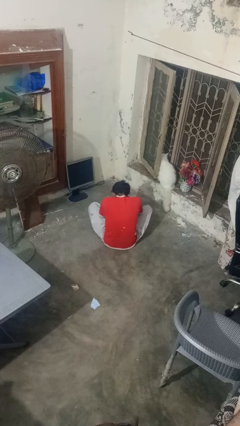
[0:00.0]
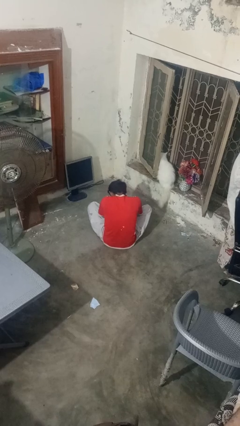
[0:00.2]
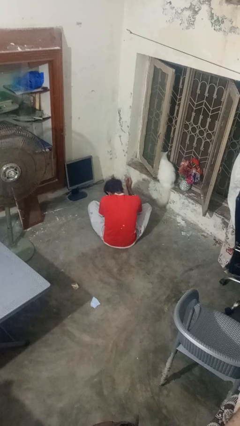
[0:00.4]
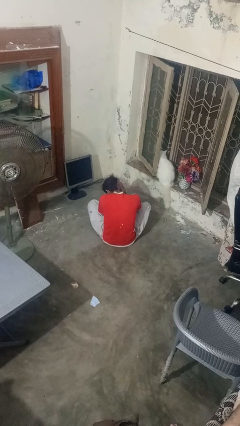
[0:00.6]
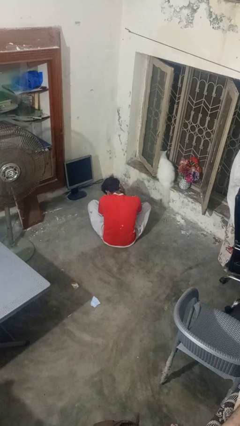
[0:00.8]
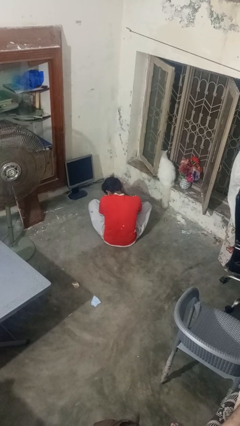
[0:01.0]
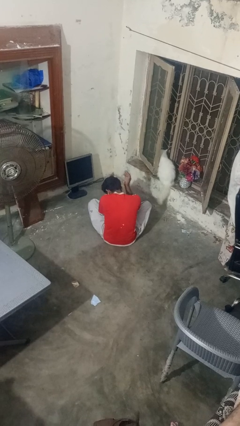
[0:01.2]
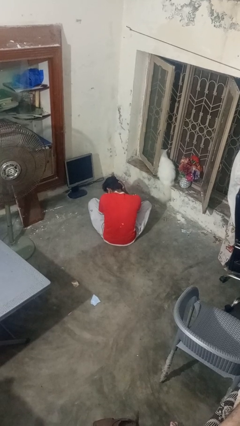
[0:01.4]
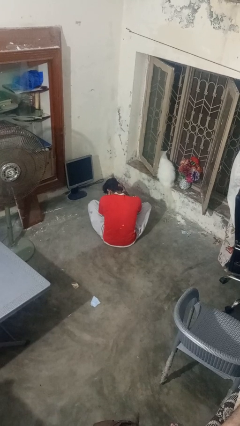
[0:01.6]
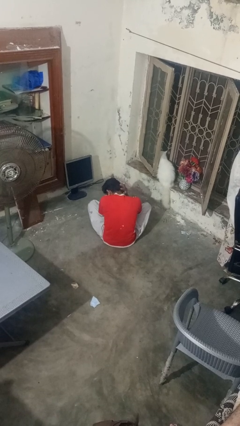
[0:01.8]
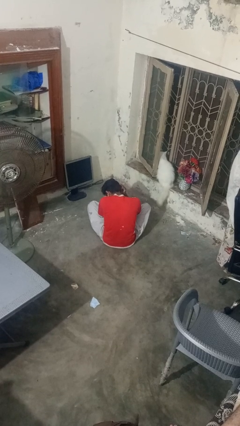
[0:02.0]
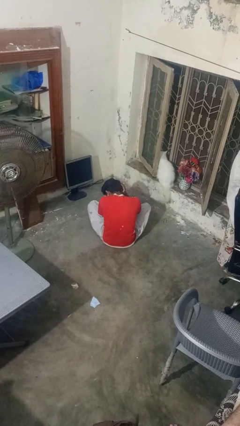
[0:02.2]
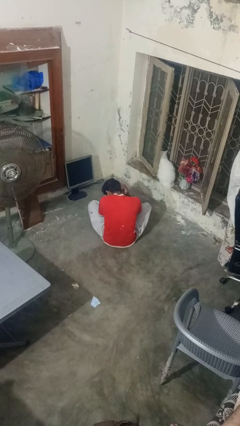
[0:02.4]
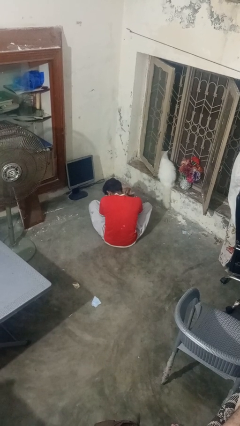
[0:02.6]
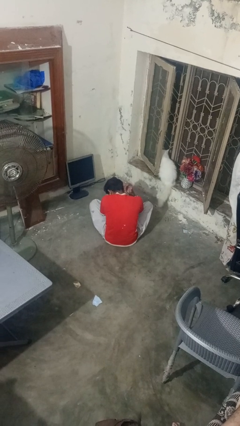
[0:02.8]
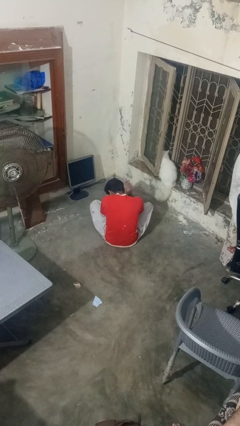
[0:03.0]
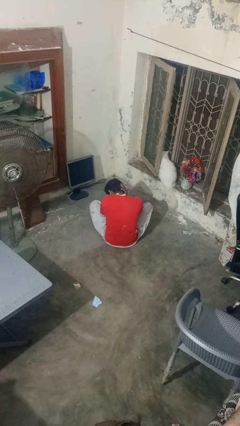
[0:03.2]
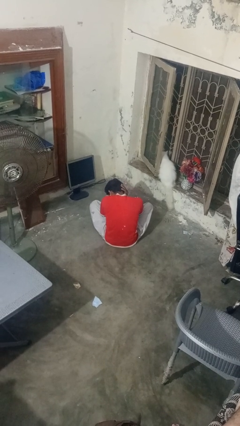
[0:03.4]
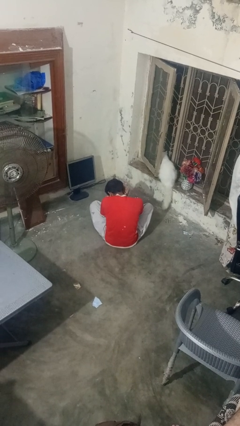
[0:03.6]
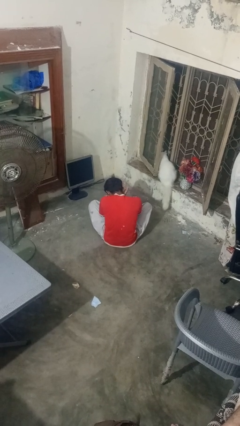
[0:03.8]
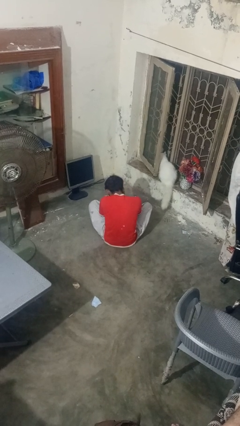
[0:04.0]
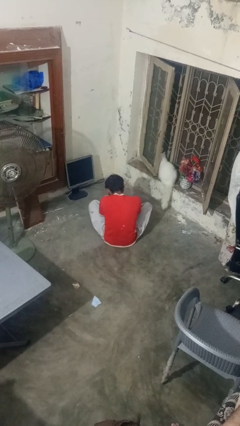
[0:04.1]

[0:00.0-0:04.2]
person swats bug

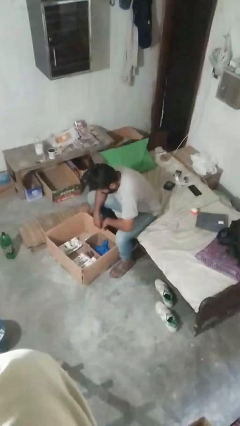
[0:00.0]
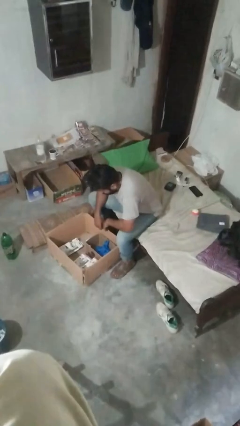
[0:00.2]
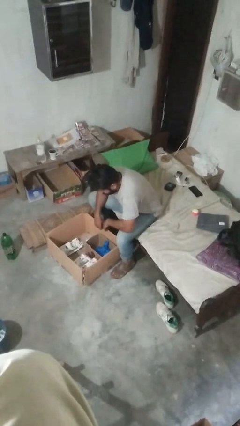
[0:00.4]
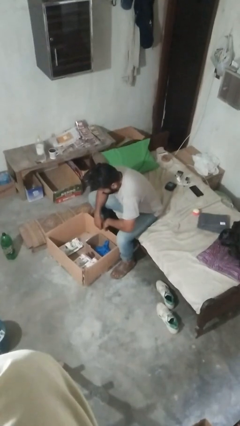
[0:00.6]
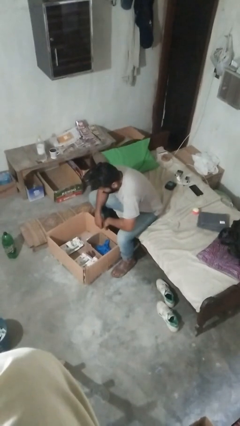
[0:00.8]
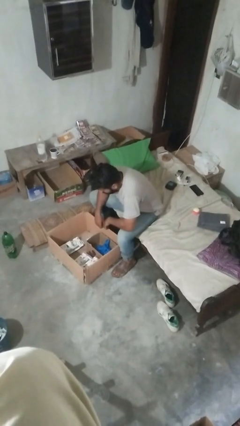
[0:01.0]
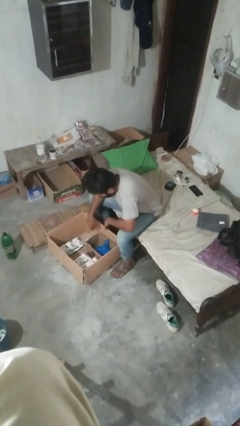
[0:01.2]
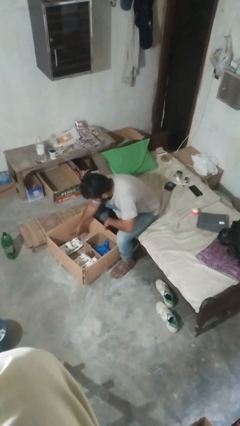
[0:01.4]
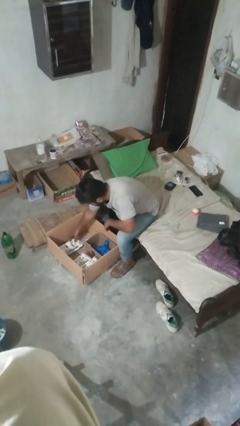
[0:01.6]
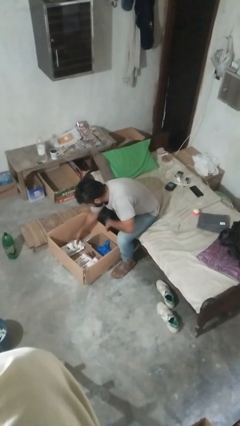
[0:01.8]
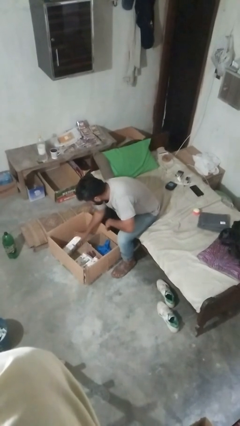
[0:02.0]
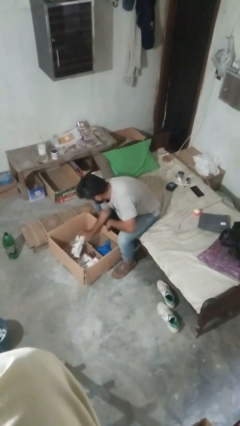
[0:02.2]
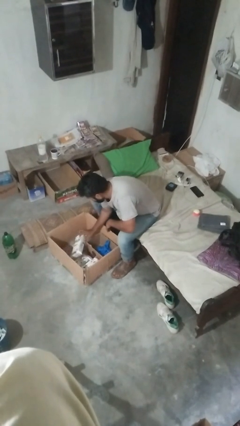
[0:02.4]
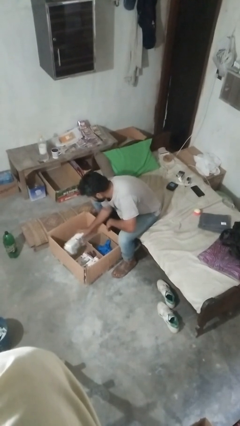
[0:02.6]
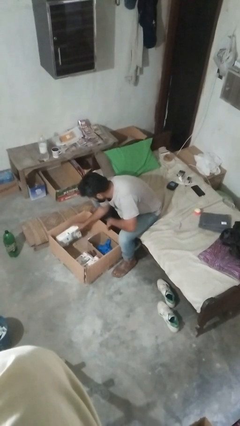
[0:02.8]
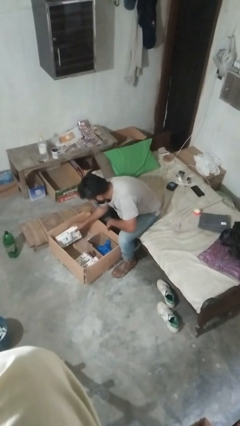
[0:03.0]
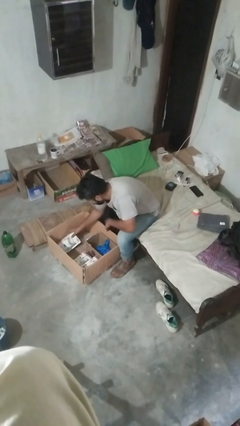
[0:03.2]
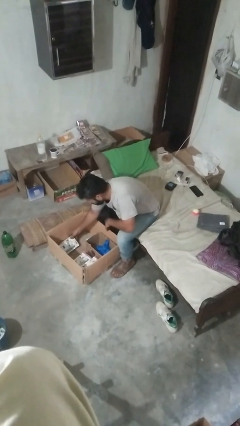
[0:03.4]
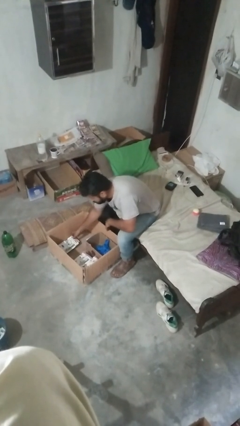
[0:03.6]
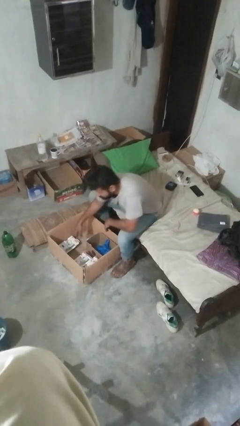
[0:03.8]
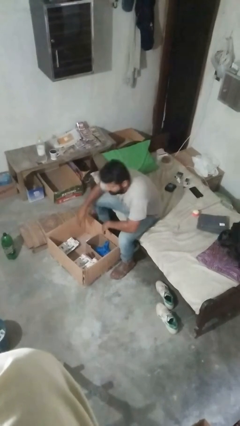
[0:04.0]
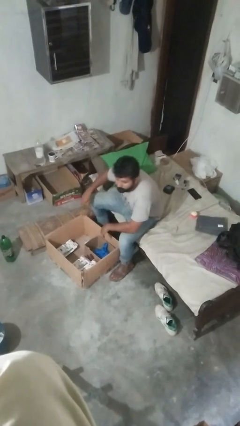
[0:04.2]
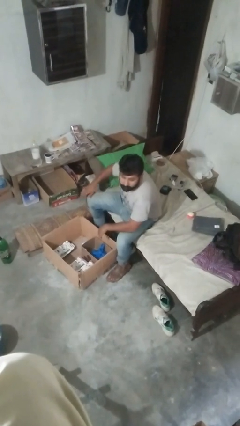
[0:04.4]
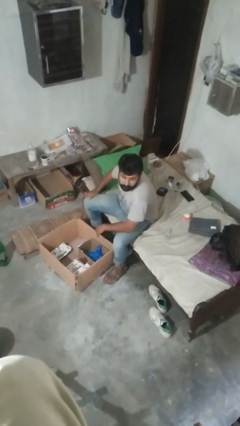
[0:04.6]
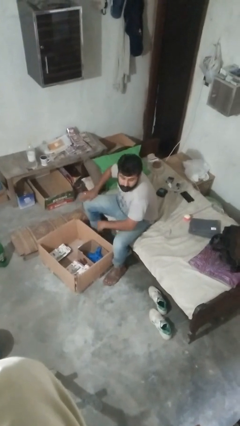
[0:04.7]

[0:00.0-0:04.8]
person searches in box

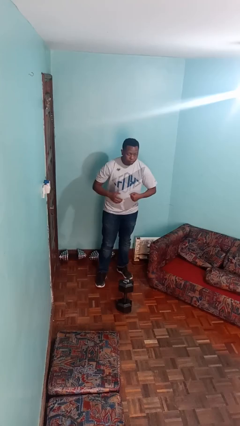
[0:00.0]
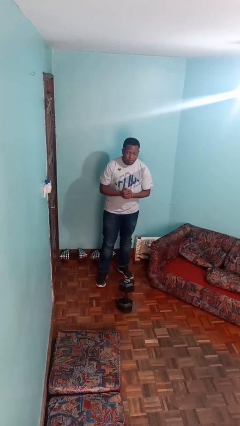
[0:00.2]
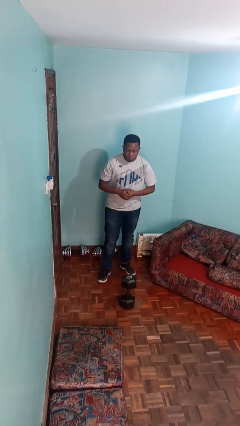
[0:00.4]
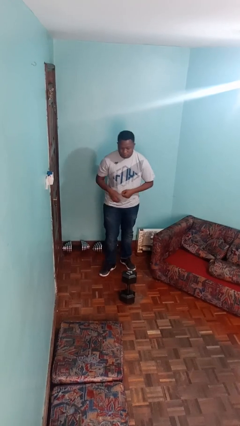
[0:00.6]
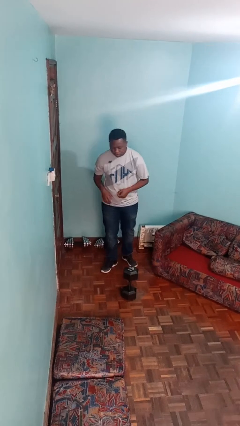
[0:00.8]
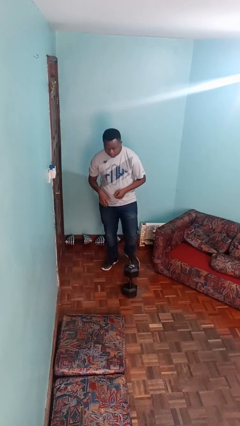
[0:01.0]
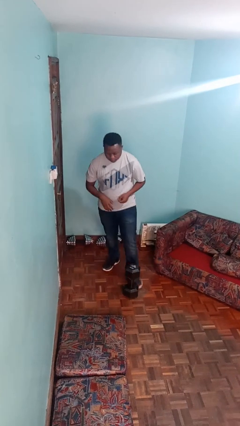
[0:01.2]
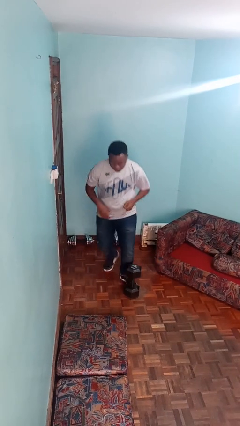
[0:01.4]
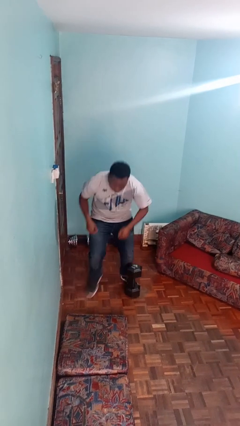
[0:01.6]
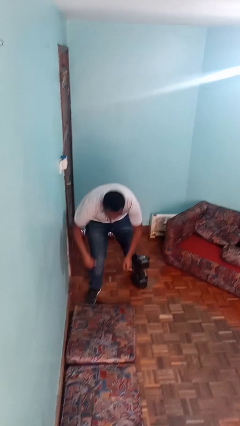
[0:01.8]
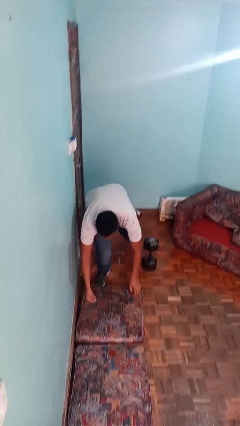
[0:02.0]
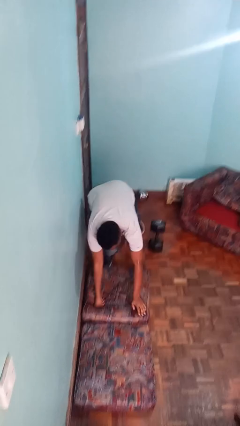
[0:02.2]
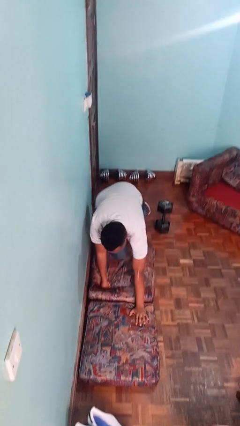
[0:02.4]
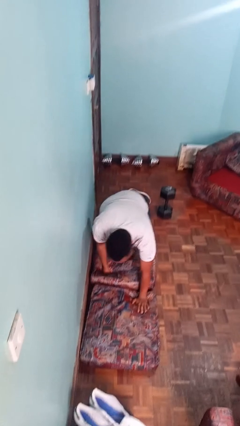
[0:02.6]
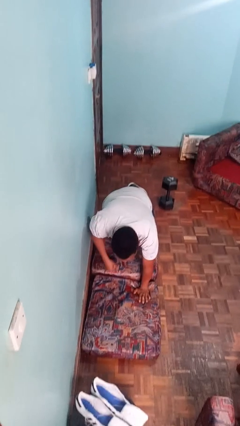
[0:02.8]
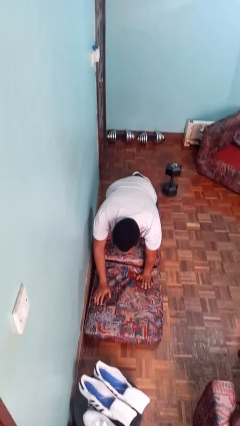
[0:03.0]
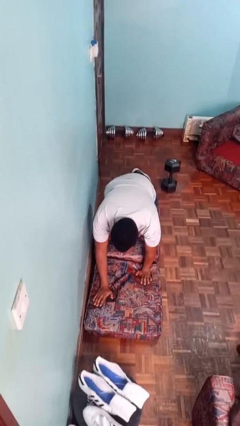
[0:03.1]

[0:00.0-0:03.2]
person trips on object on floor

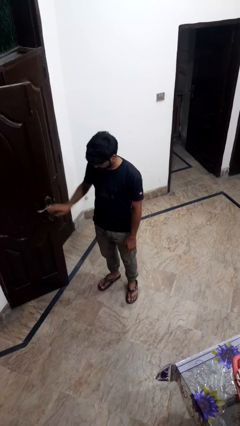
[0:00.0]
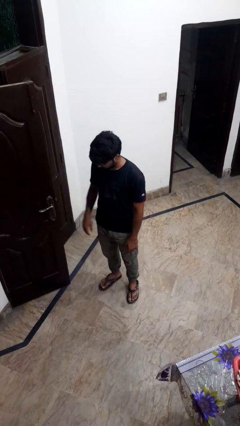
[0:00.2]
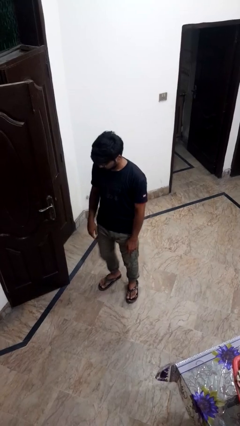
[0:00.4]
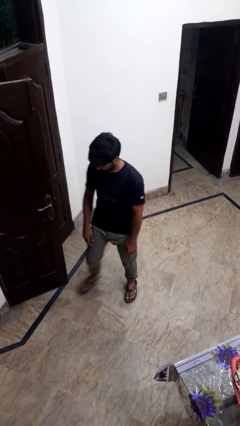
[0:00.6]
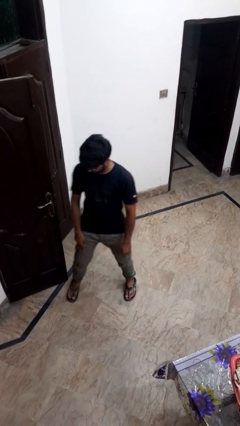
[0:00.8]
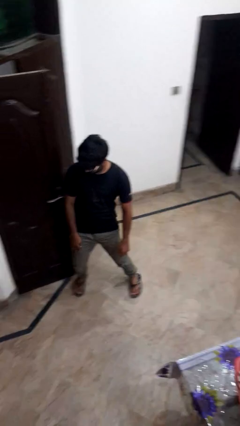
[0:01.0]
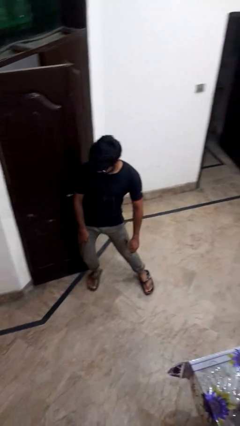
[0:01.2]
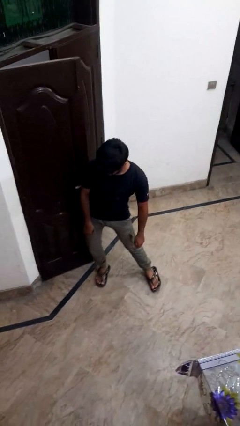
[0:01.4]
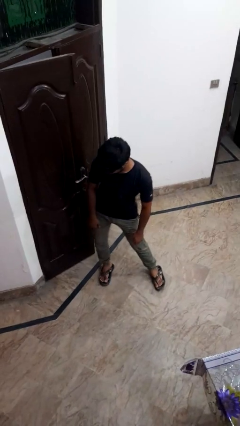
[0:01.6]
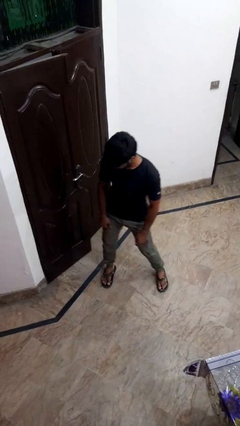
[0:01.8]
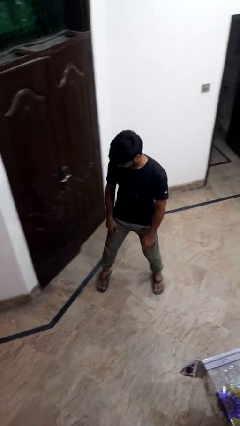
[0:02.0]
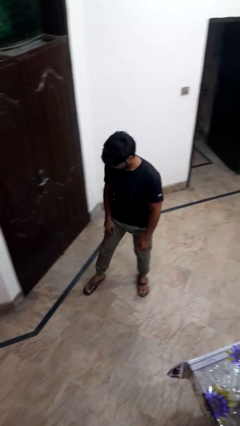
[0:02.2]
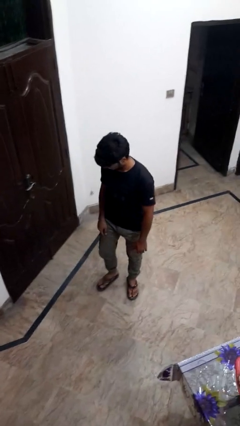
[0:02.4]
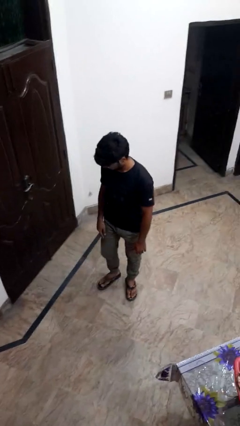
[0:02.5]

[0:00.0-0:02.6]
person closes door with hip

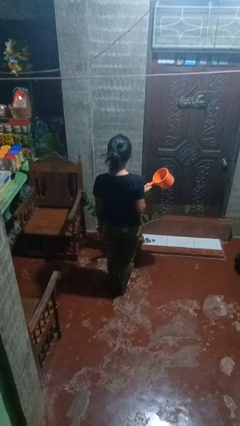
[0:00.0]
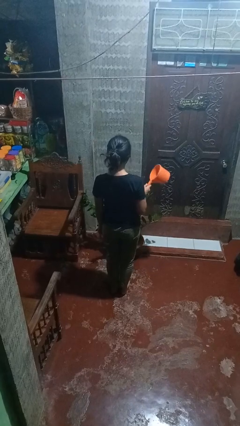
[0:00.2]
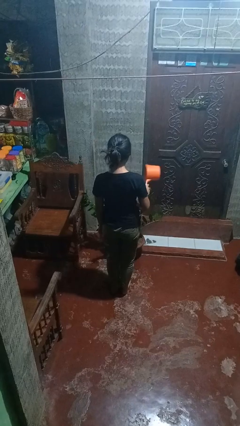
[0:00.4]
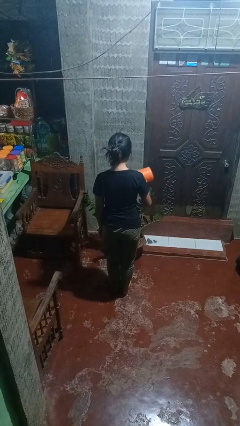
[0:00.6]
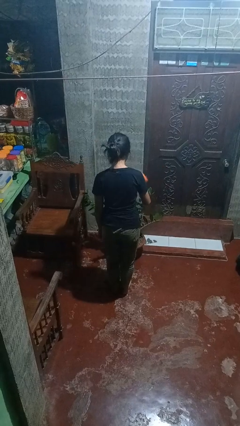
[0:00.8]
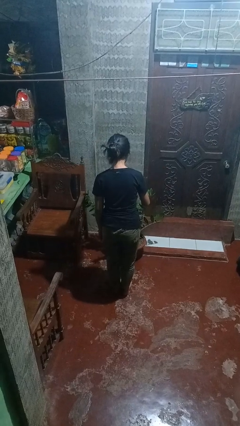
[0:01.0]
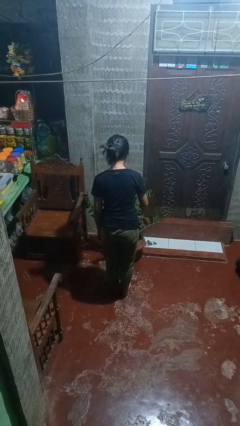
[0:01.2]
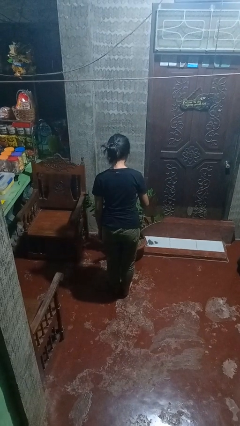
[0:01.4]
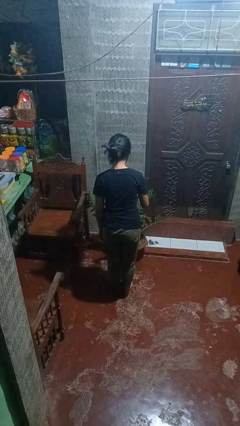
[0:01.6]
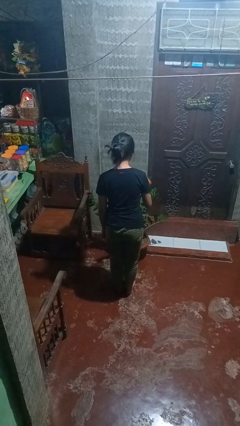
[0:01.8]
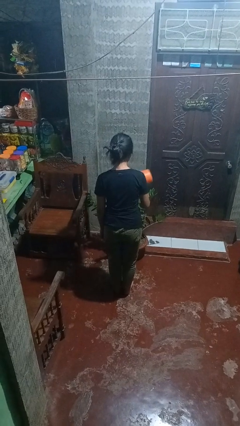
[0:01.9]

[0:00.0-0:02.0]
person waters houseplant

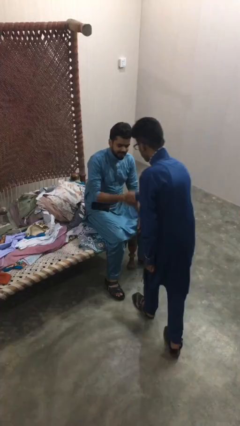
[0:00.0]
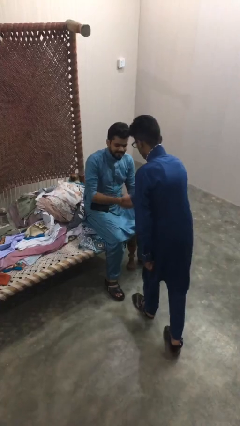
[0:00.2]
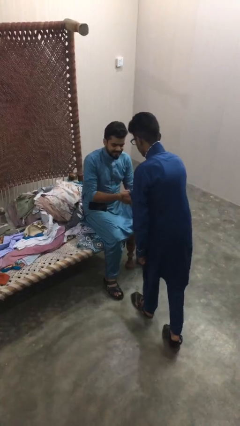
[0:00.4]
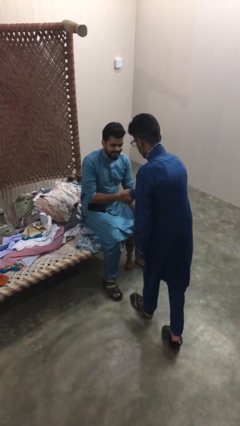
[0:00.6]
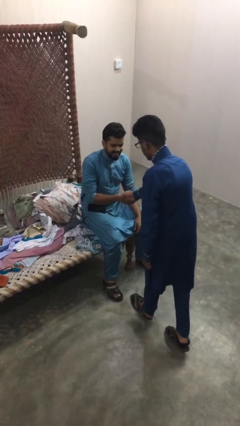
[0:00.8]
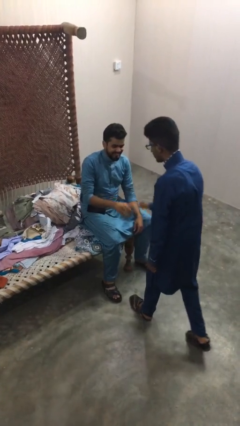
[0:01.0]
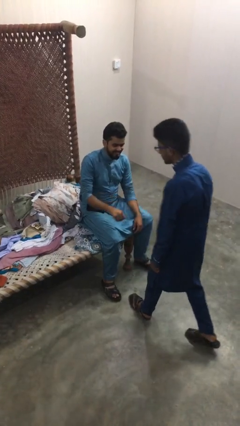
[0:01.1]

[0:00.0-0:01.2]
person shakes hand
